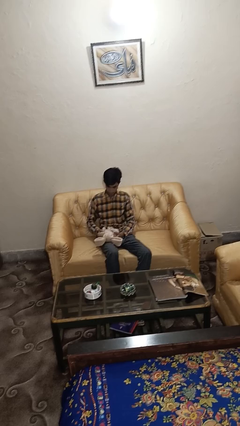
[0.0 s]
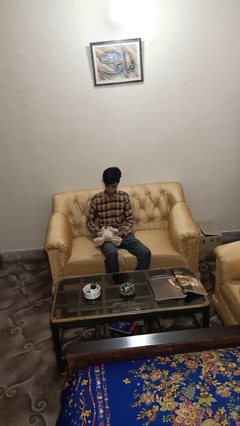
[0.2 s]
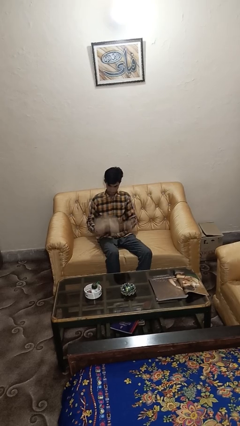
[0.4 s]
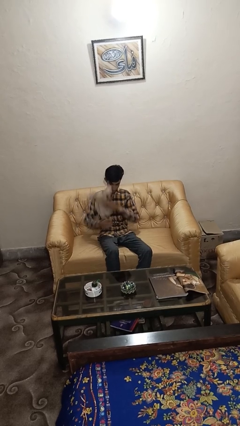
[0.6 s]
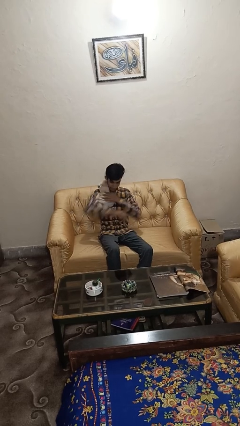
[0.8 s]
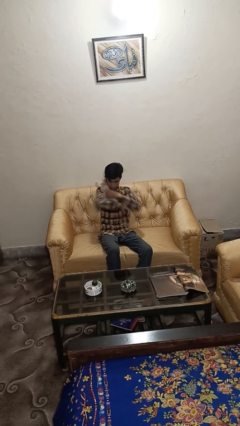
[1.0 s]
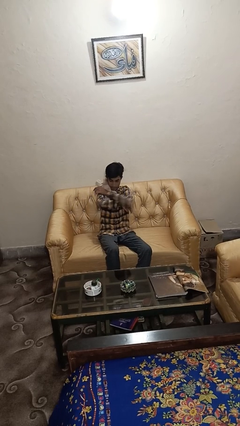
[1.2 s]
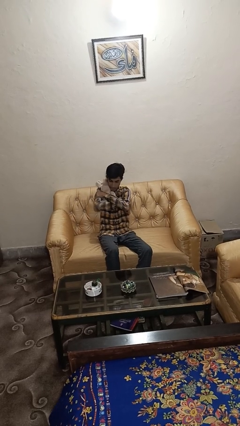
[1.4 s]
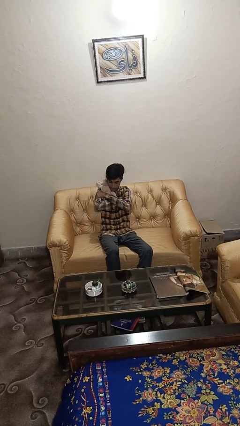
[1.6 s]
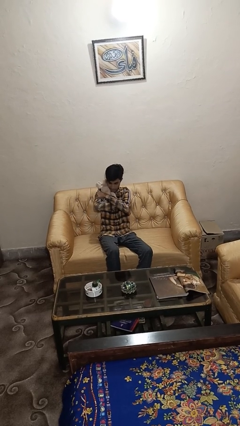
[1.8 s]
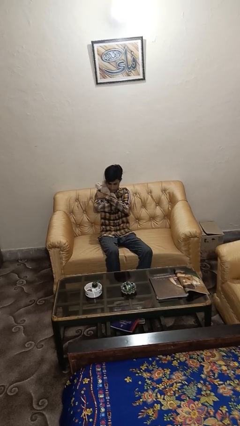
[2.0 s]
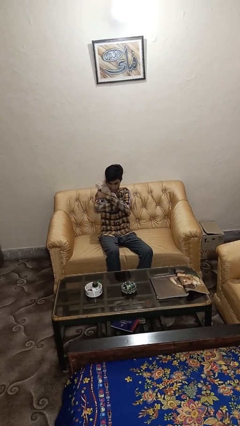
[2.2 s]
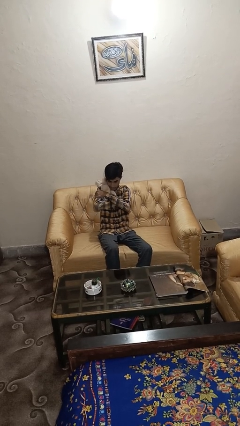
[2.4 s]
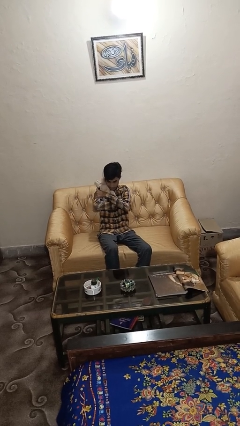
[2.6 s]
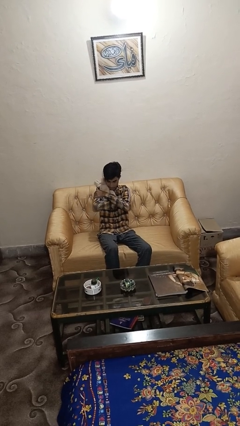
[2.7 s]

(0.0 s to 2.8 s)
person hugs stuffed animal

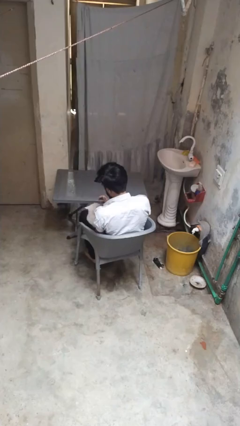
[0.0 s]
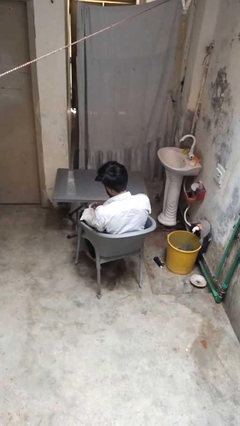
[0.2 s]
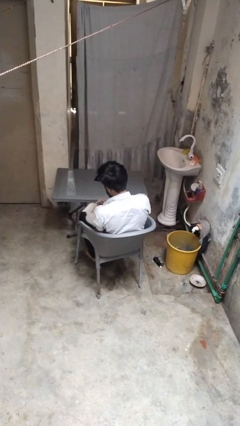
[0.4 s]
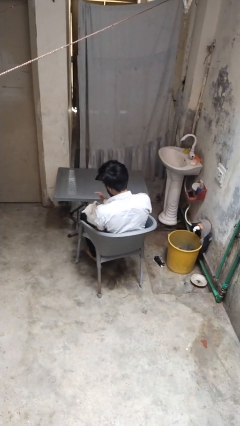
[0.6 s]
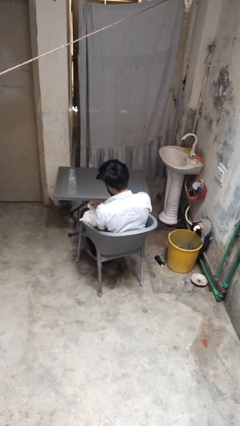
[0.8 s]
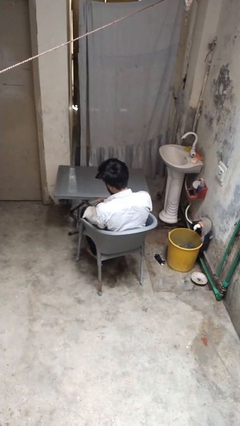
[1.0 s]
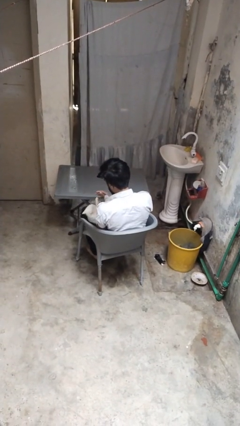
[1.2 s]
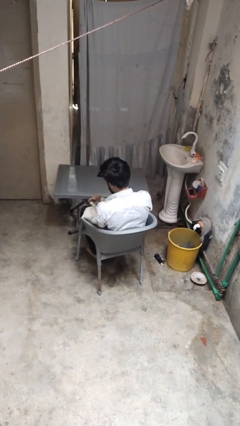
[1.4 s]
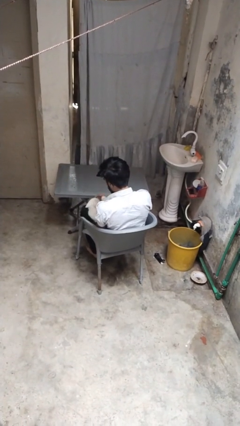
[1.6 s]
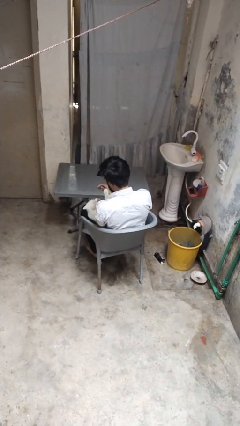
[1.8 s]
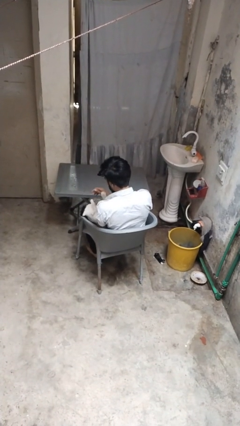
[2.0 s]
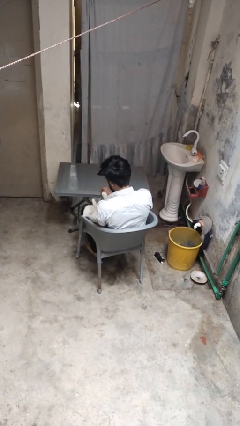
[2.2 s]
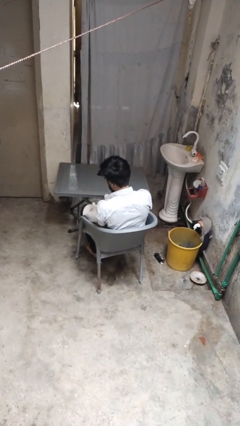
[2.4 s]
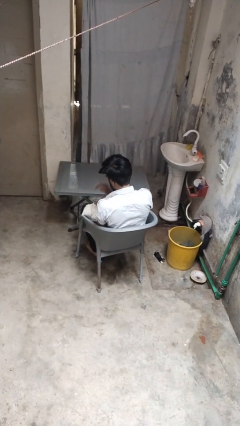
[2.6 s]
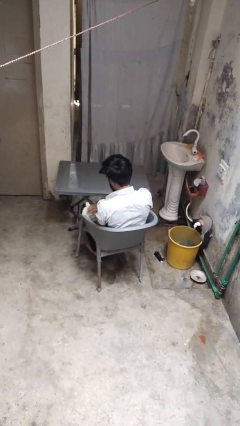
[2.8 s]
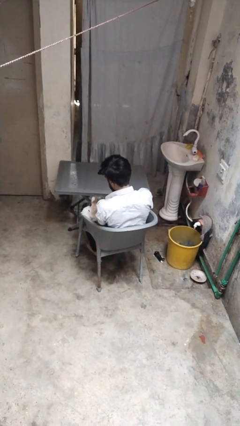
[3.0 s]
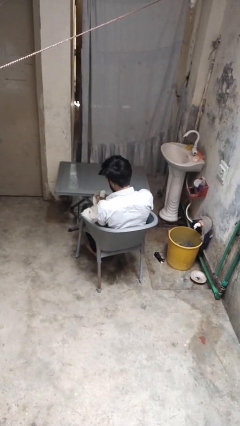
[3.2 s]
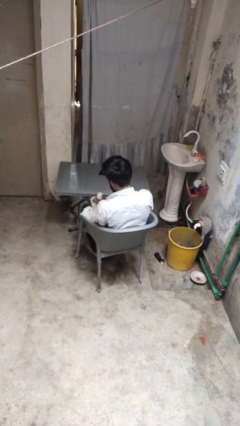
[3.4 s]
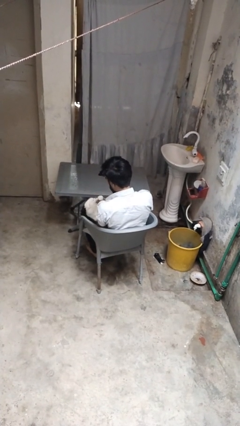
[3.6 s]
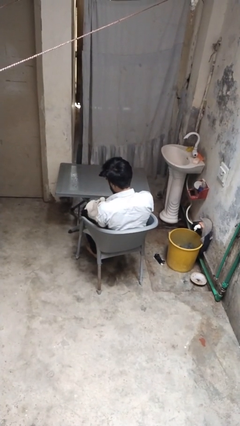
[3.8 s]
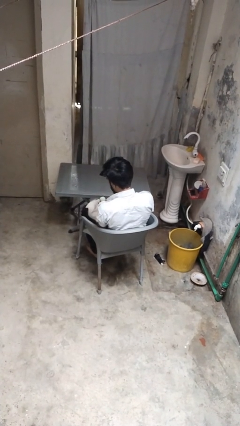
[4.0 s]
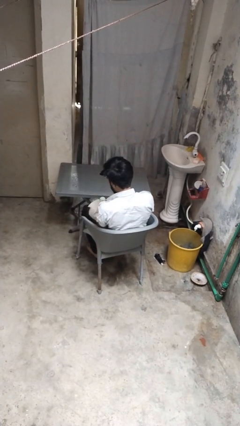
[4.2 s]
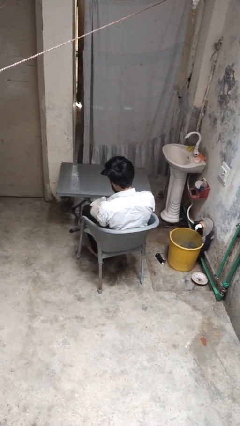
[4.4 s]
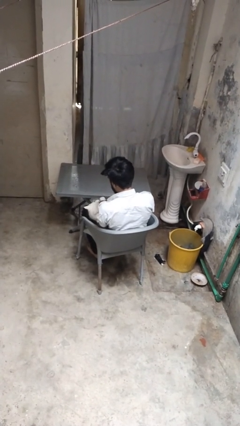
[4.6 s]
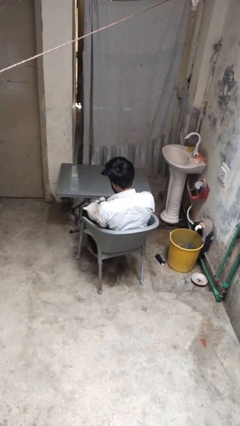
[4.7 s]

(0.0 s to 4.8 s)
person pets cat

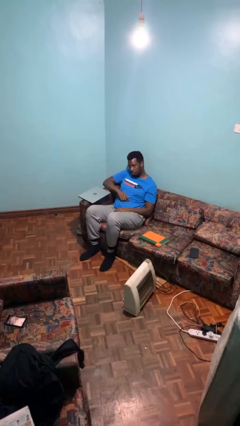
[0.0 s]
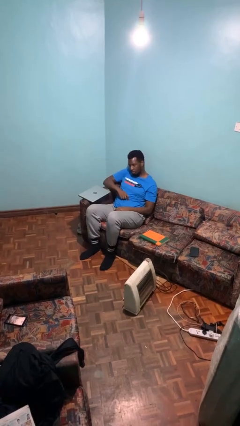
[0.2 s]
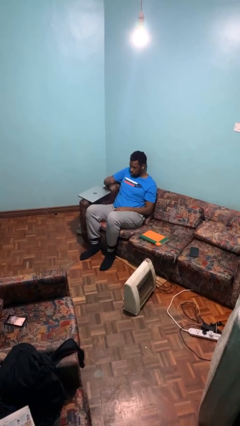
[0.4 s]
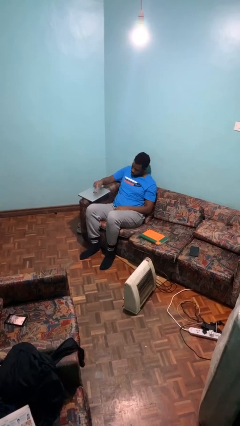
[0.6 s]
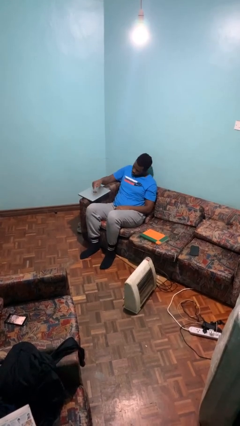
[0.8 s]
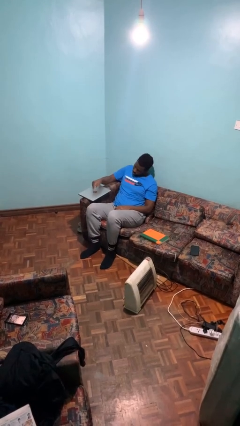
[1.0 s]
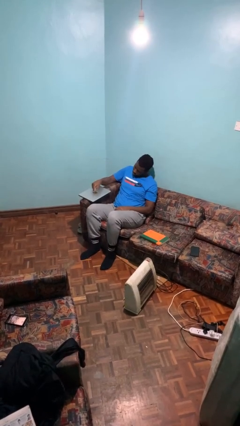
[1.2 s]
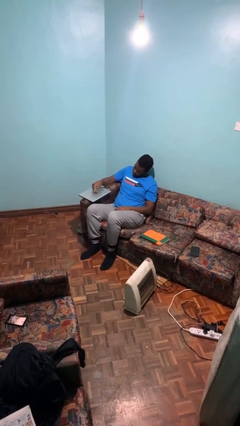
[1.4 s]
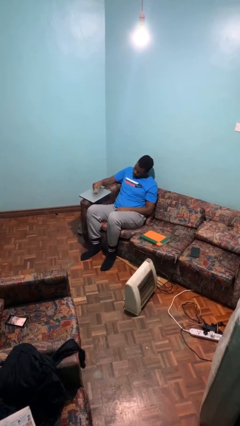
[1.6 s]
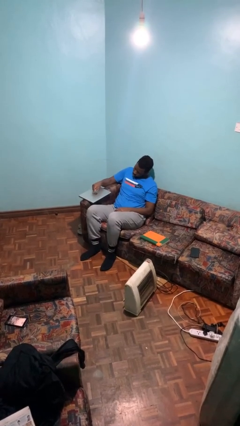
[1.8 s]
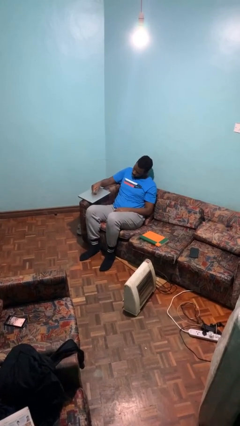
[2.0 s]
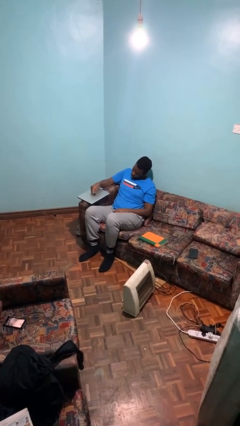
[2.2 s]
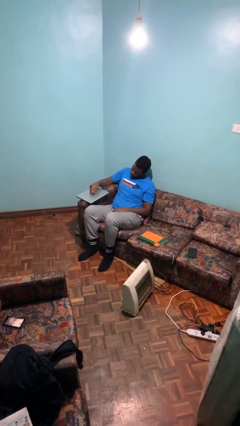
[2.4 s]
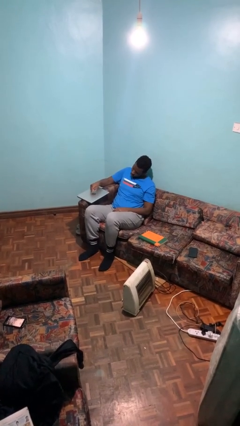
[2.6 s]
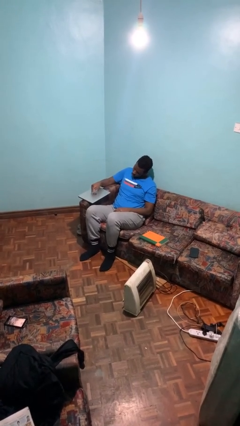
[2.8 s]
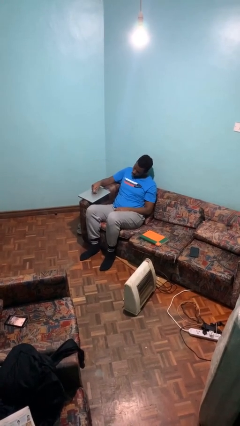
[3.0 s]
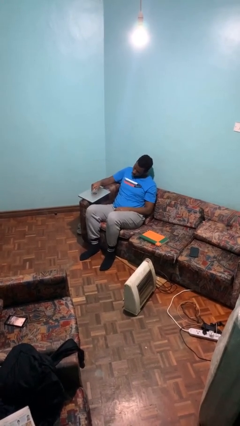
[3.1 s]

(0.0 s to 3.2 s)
person taps object with finger

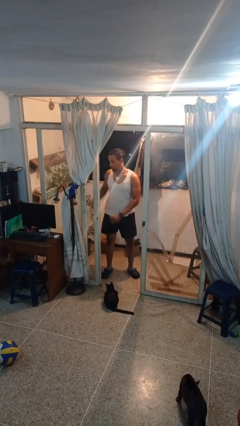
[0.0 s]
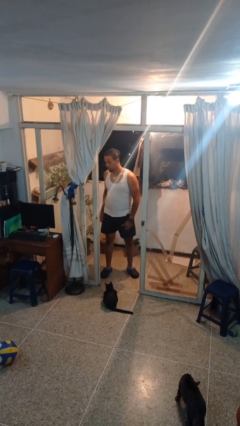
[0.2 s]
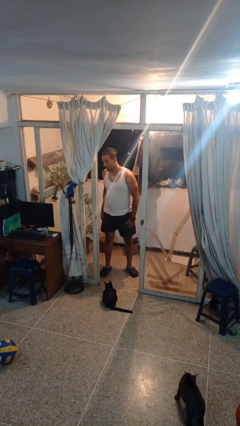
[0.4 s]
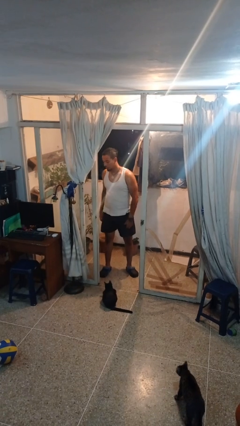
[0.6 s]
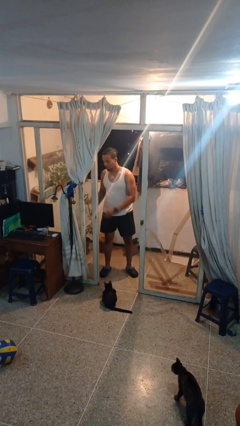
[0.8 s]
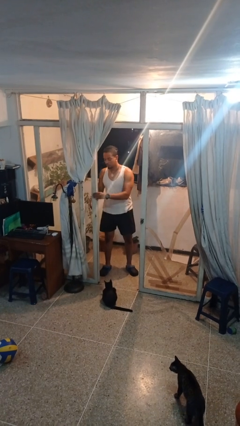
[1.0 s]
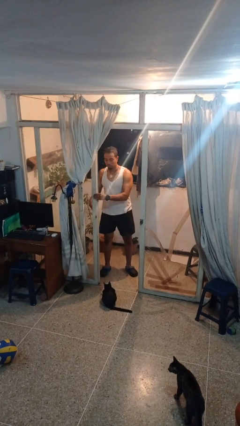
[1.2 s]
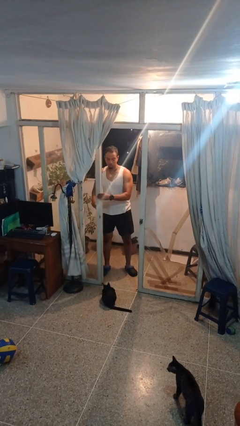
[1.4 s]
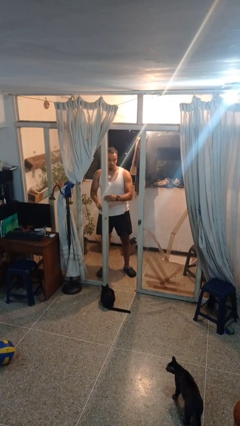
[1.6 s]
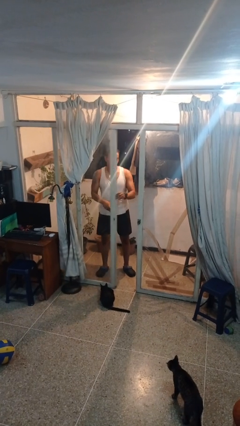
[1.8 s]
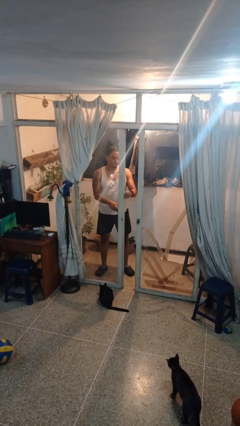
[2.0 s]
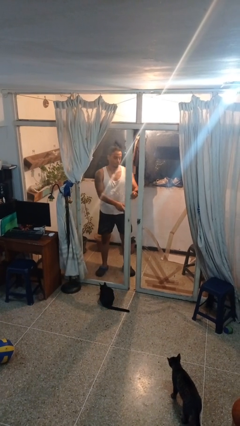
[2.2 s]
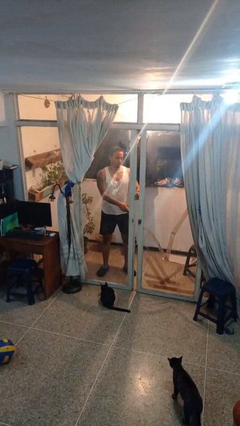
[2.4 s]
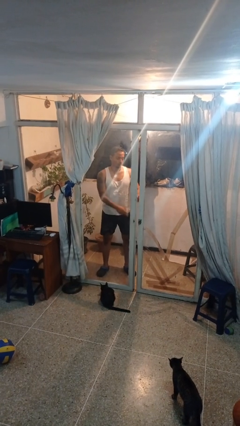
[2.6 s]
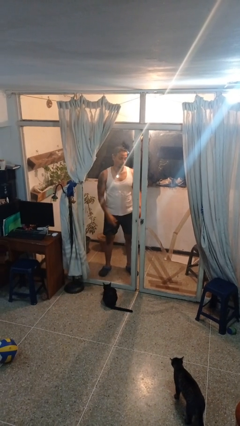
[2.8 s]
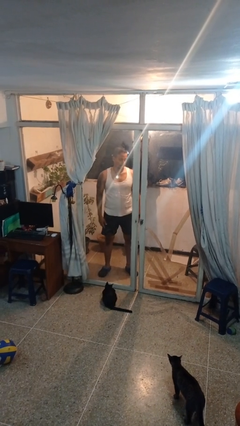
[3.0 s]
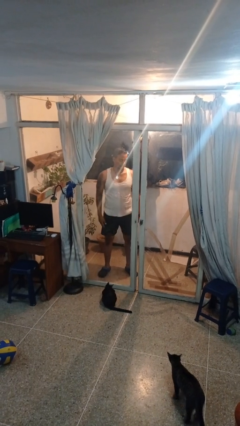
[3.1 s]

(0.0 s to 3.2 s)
person closes sliding door

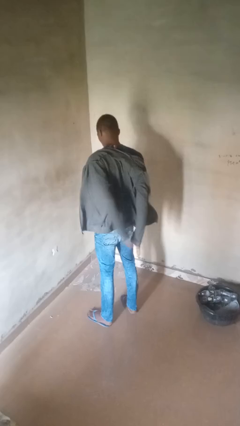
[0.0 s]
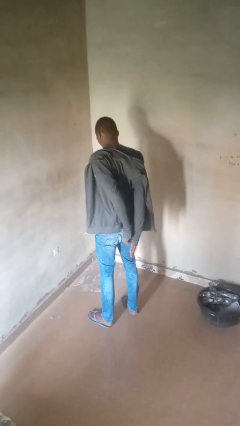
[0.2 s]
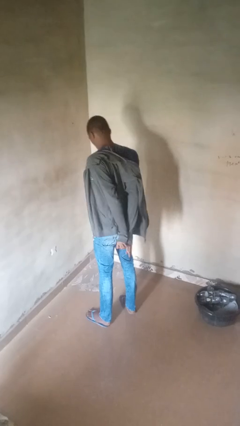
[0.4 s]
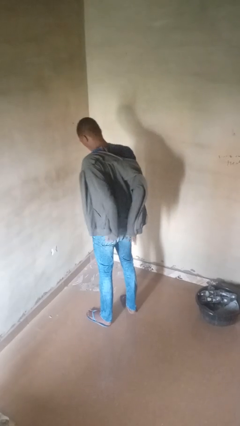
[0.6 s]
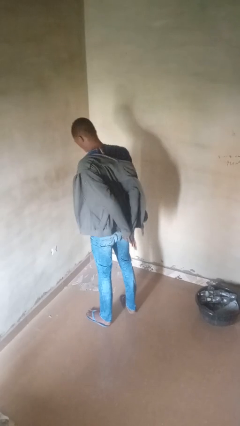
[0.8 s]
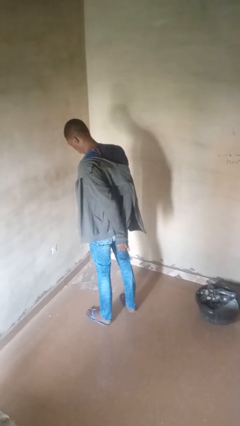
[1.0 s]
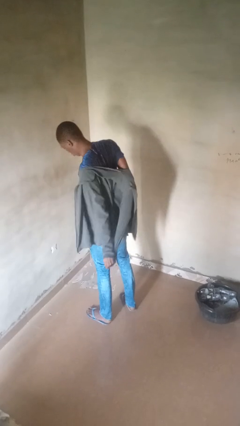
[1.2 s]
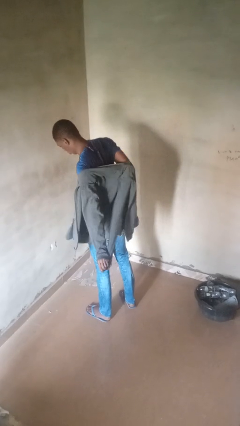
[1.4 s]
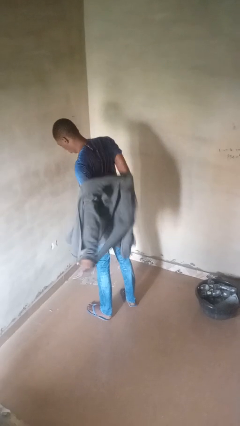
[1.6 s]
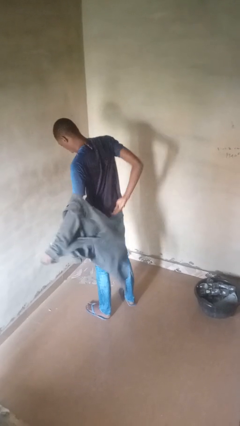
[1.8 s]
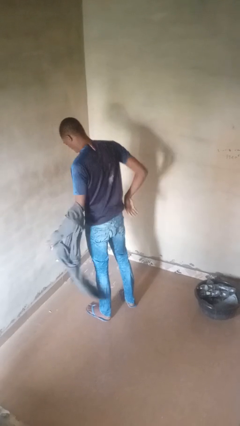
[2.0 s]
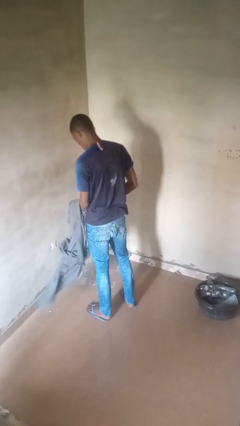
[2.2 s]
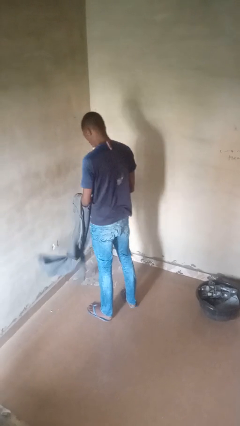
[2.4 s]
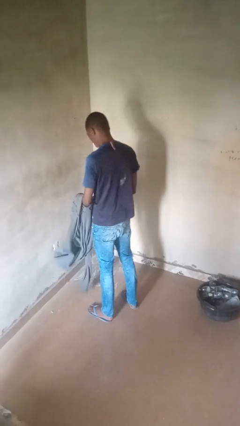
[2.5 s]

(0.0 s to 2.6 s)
person takes off jacket

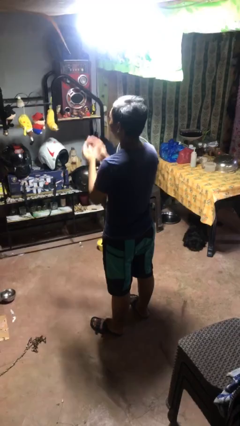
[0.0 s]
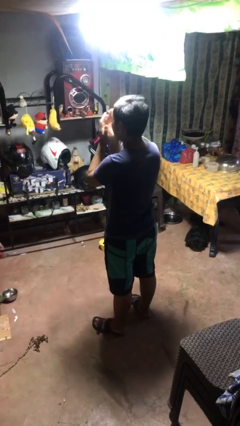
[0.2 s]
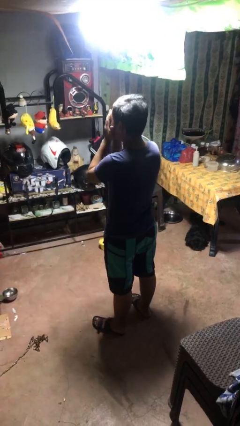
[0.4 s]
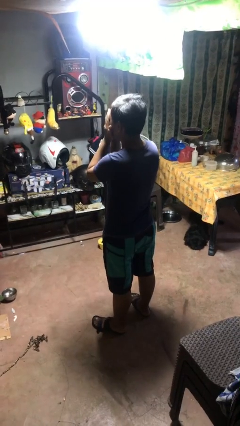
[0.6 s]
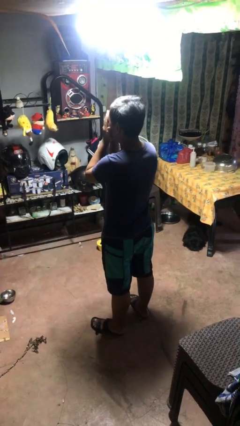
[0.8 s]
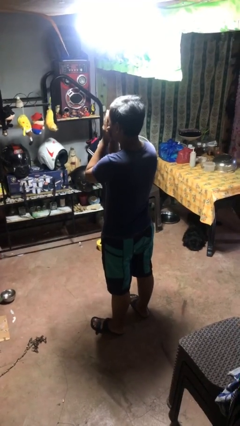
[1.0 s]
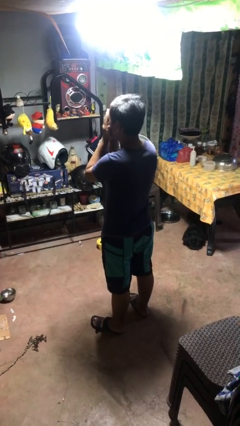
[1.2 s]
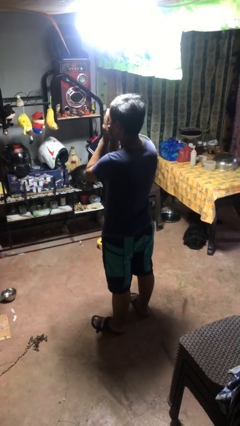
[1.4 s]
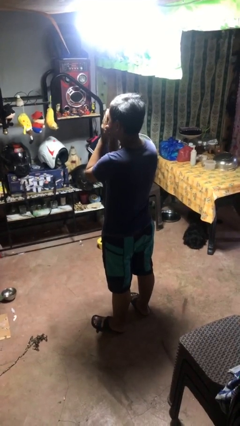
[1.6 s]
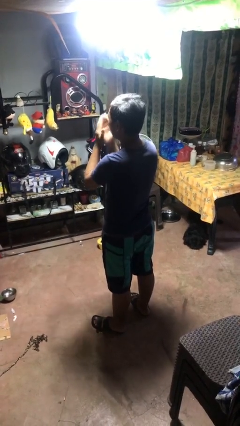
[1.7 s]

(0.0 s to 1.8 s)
person covers face with hands
